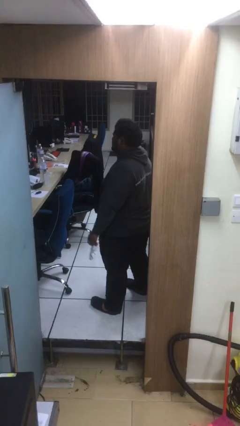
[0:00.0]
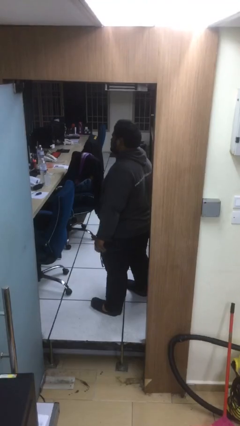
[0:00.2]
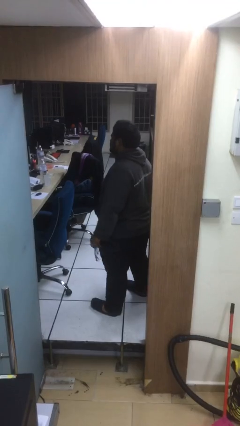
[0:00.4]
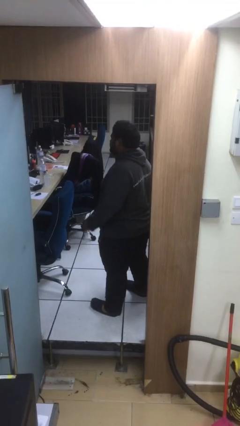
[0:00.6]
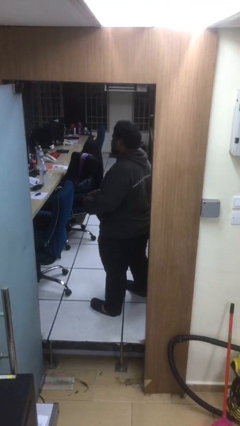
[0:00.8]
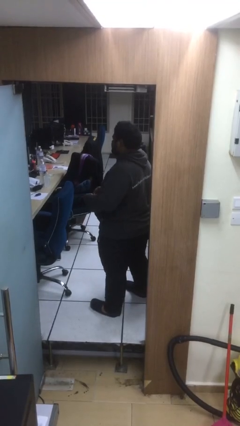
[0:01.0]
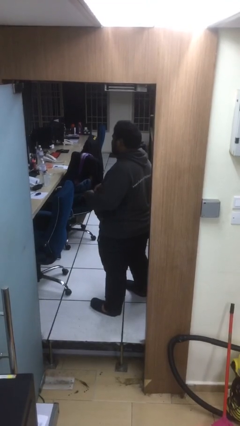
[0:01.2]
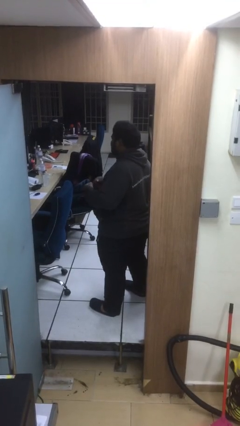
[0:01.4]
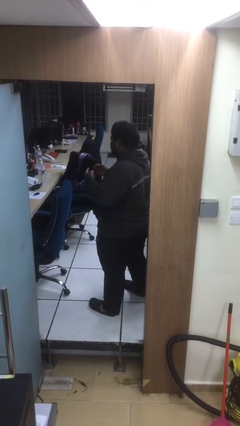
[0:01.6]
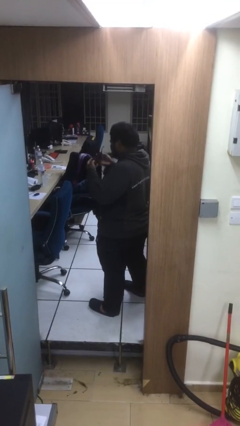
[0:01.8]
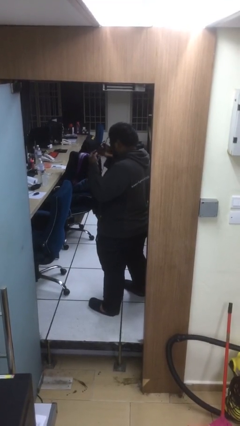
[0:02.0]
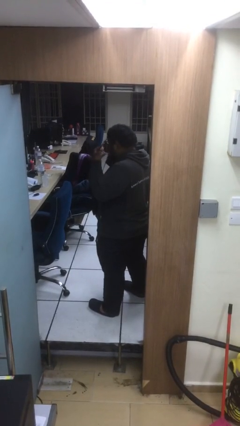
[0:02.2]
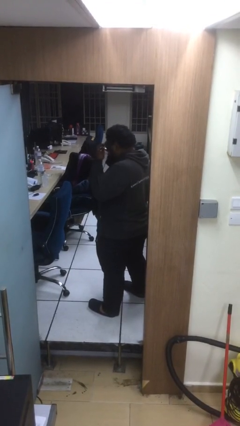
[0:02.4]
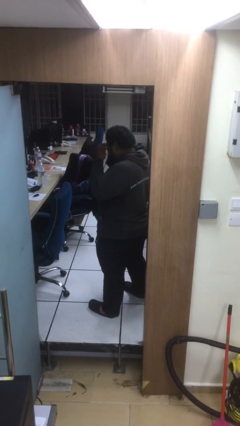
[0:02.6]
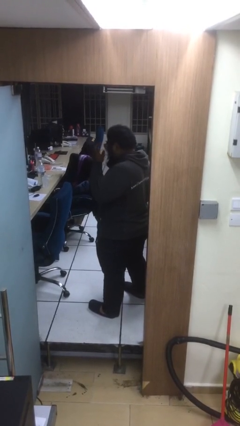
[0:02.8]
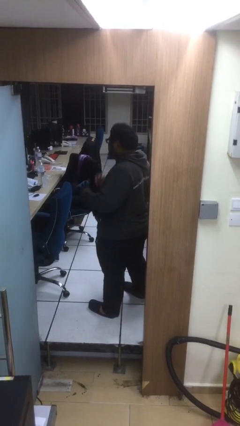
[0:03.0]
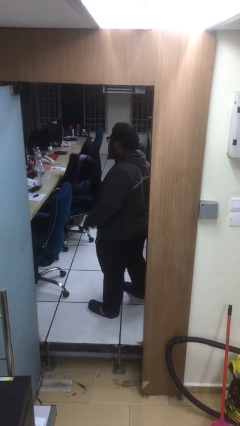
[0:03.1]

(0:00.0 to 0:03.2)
person puts on glasses

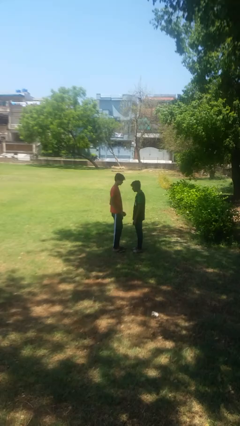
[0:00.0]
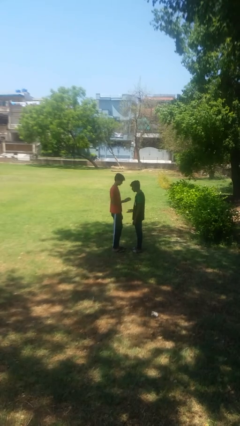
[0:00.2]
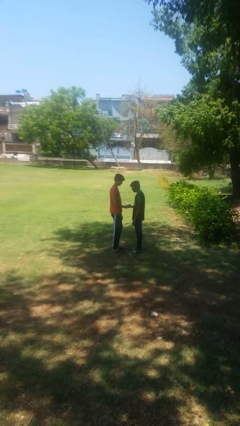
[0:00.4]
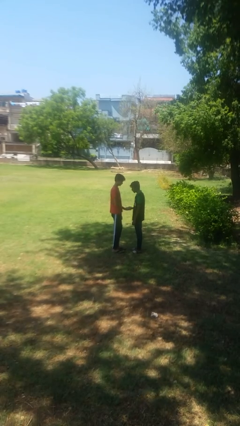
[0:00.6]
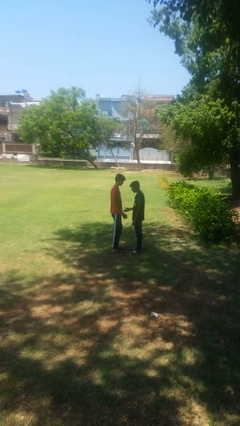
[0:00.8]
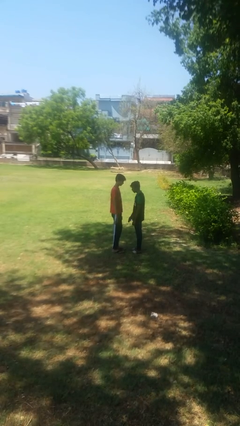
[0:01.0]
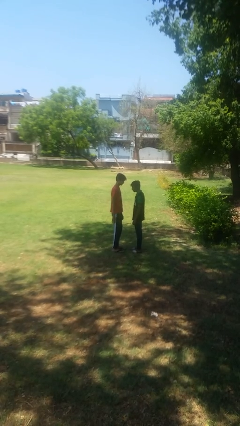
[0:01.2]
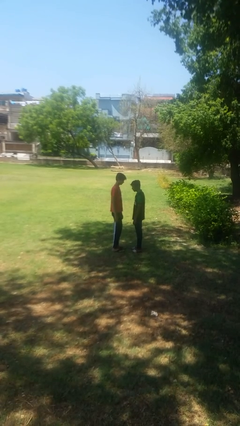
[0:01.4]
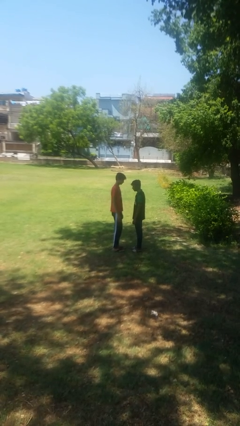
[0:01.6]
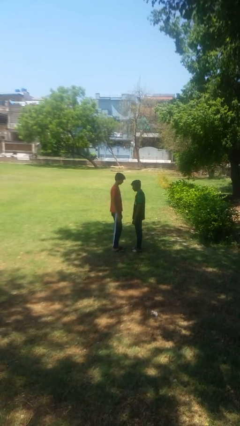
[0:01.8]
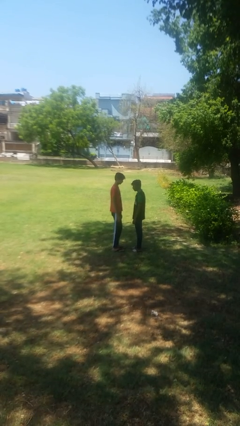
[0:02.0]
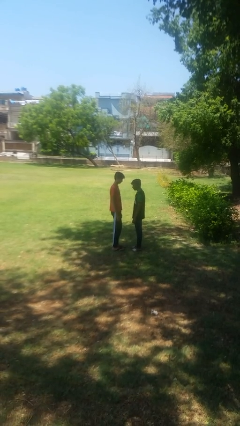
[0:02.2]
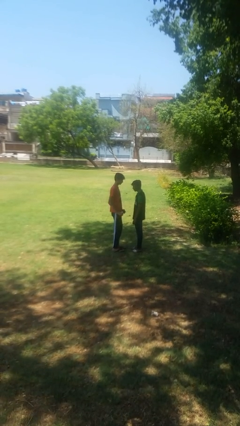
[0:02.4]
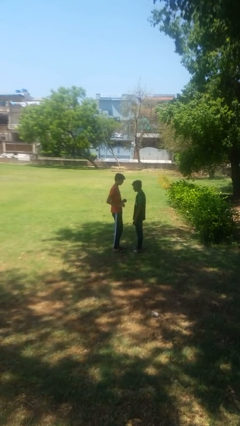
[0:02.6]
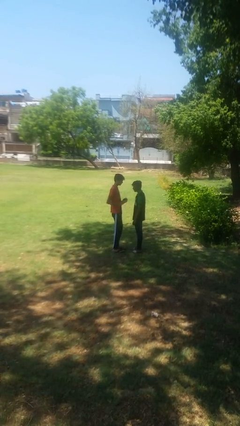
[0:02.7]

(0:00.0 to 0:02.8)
person highfives hand

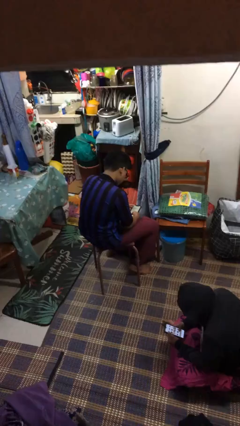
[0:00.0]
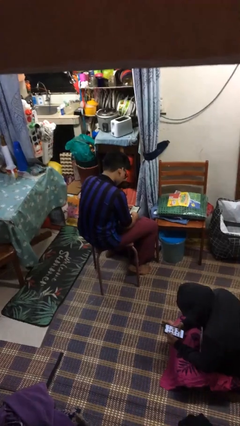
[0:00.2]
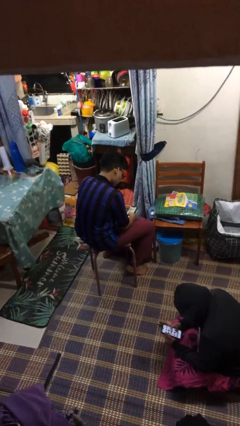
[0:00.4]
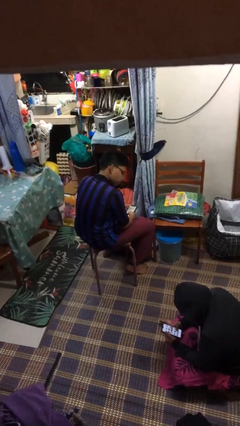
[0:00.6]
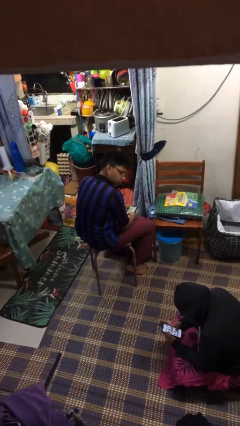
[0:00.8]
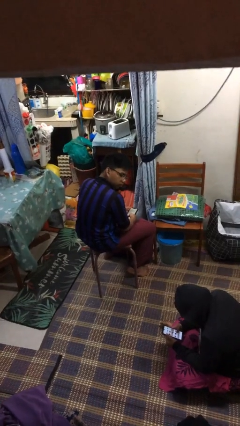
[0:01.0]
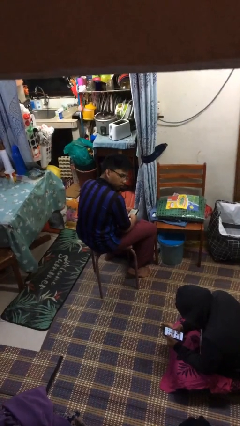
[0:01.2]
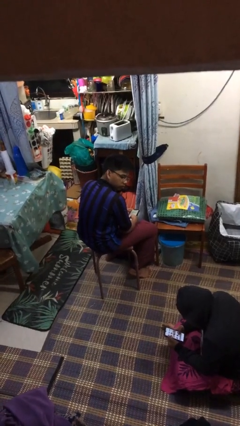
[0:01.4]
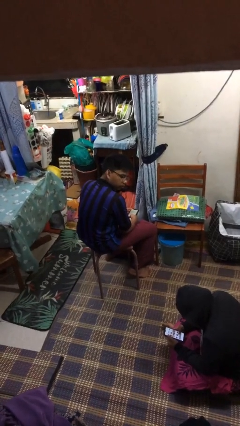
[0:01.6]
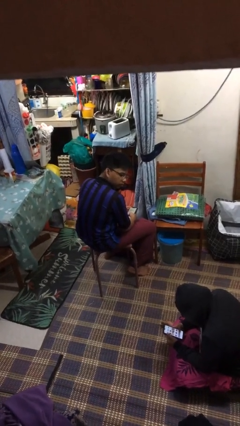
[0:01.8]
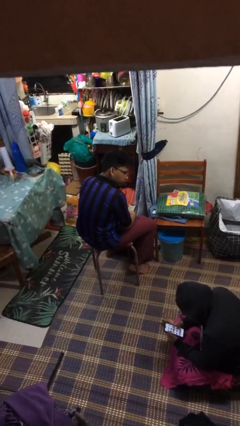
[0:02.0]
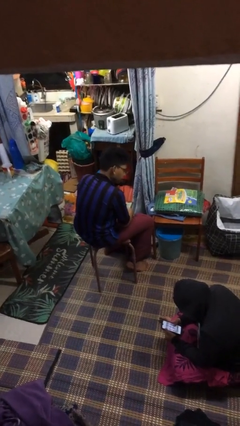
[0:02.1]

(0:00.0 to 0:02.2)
person looks over shoulder

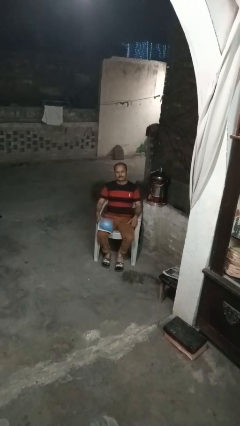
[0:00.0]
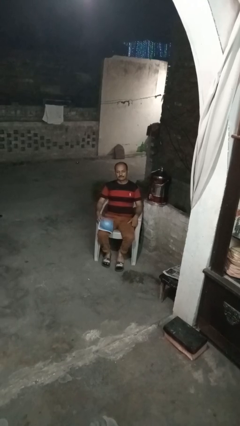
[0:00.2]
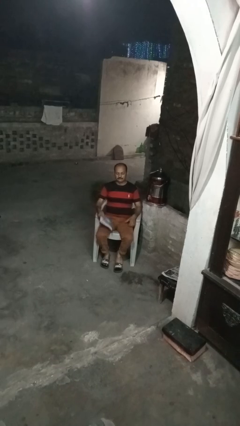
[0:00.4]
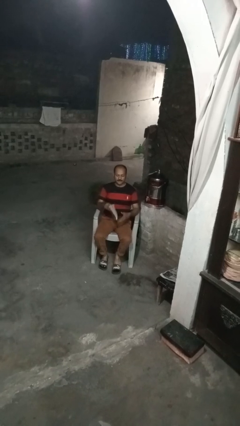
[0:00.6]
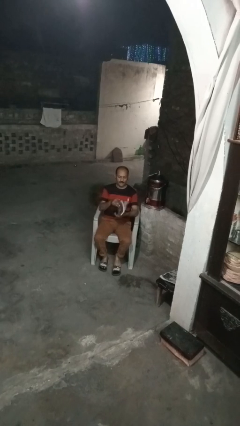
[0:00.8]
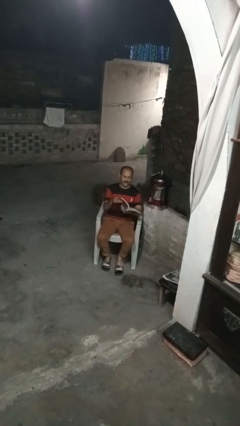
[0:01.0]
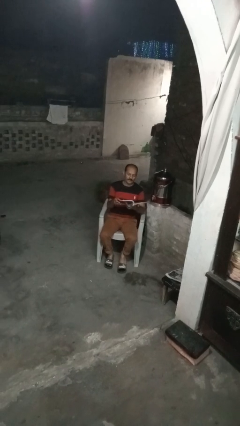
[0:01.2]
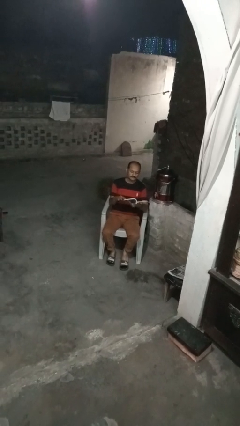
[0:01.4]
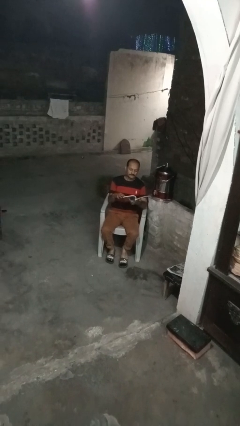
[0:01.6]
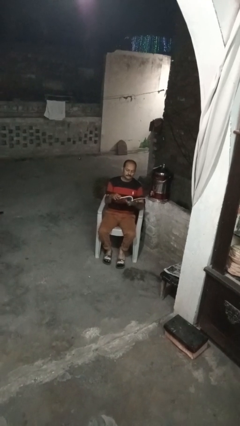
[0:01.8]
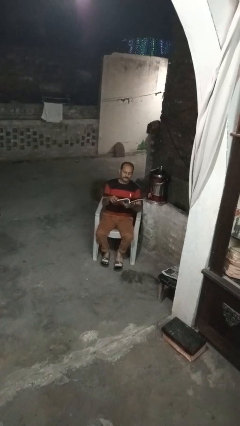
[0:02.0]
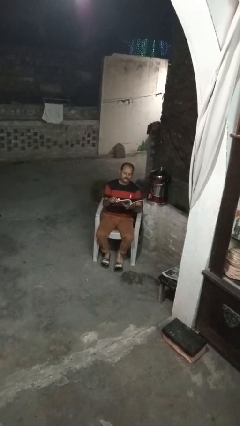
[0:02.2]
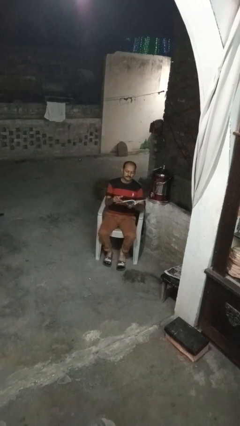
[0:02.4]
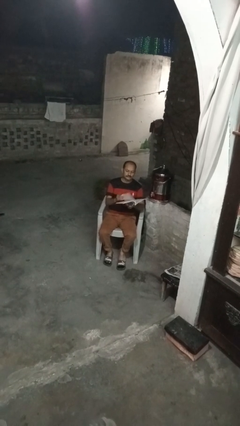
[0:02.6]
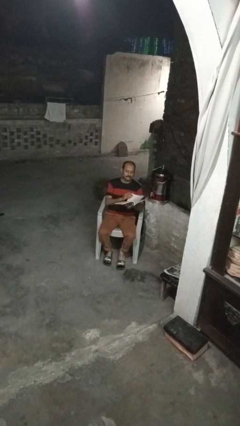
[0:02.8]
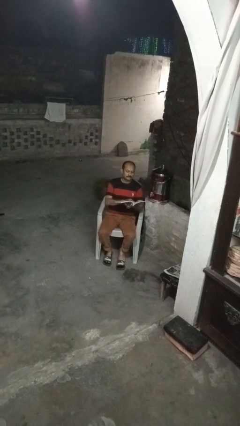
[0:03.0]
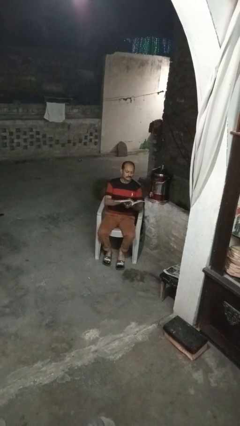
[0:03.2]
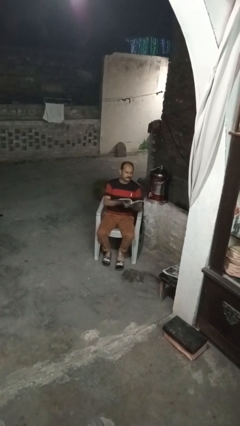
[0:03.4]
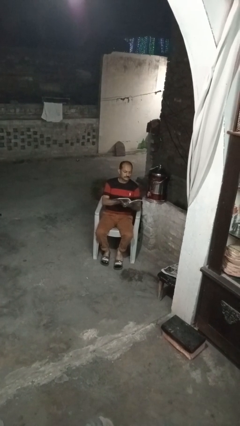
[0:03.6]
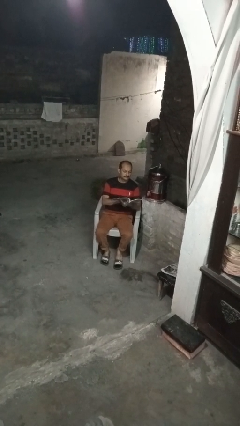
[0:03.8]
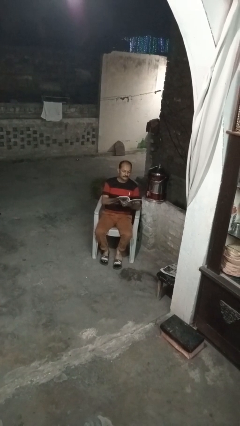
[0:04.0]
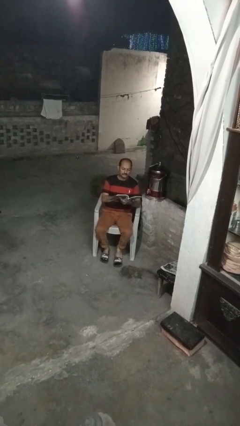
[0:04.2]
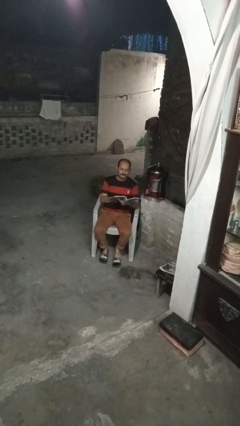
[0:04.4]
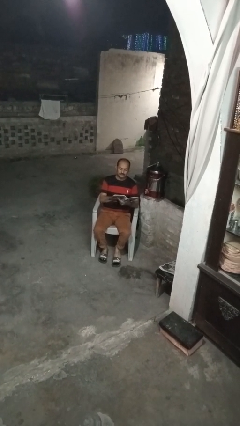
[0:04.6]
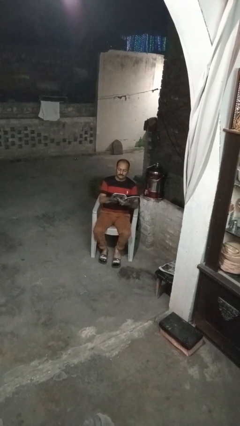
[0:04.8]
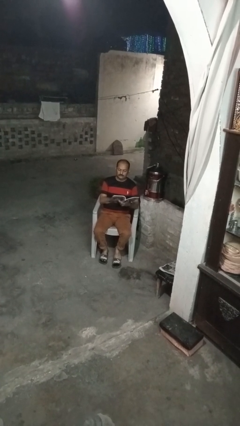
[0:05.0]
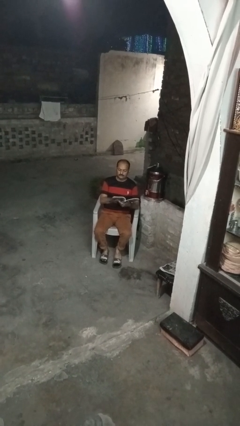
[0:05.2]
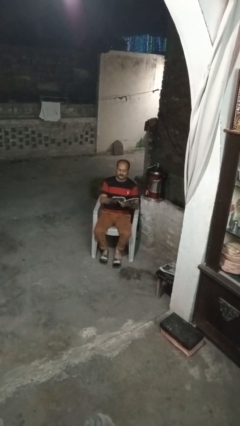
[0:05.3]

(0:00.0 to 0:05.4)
person reads book

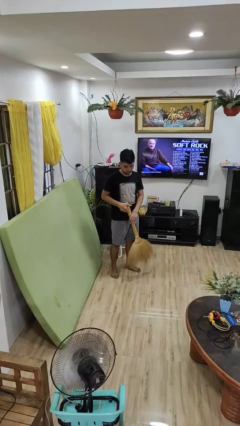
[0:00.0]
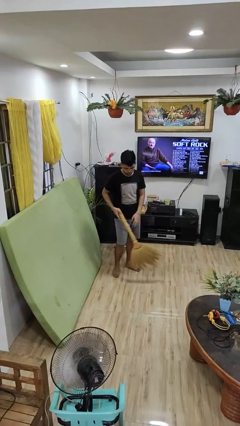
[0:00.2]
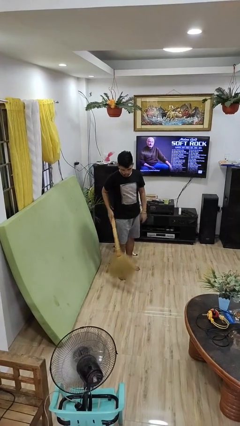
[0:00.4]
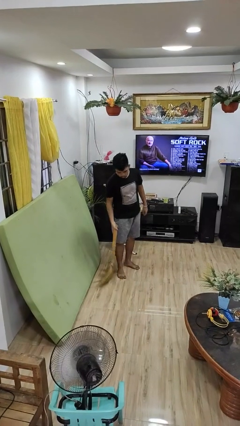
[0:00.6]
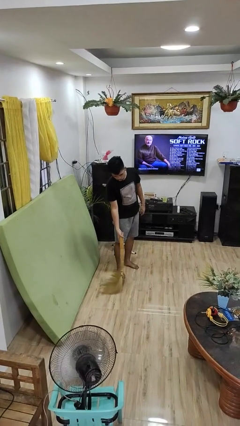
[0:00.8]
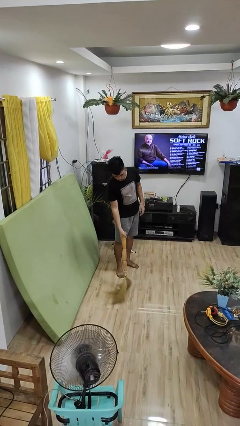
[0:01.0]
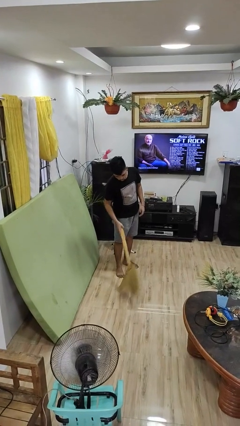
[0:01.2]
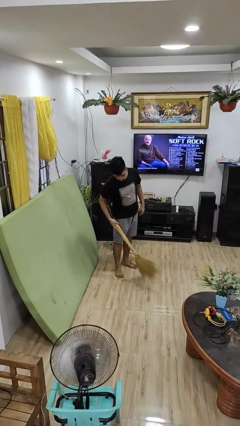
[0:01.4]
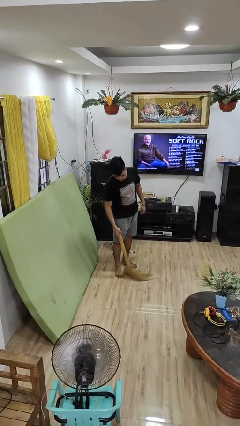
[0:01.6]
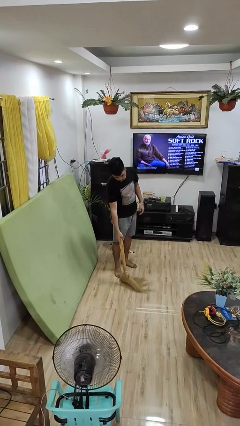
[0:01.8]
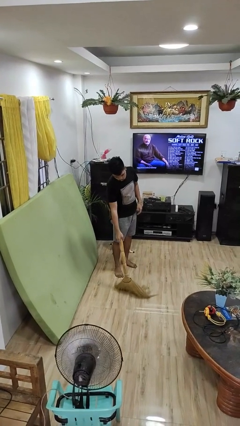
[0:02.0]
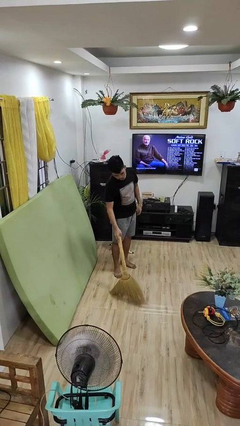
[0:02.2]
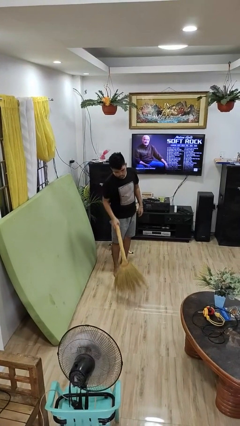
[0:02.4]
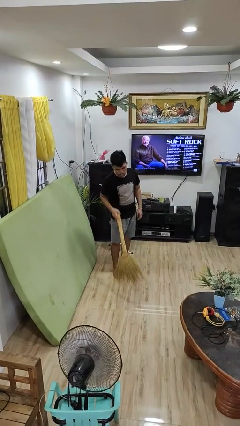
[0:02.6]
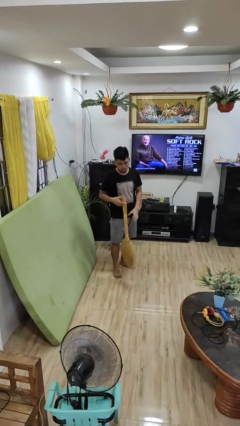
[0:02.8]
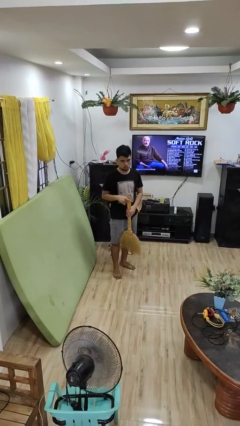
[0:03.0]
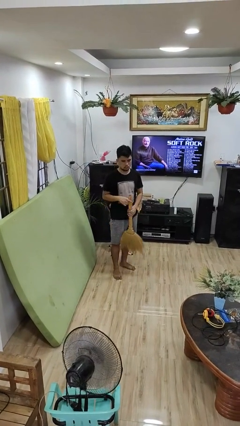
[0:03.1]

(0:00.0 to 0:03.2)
person sweeps floor

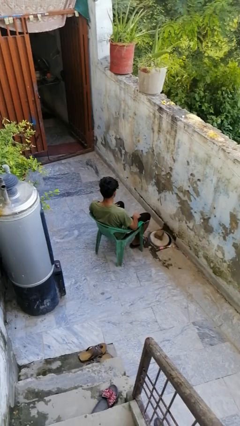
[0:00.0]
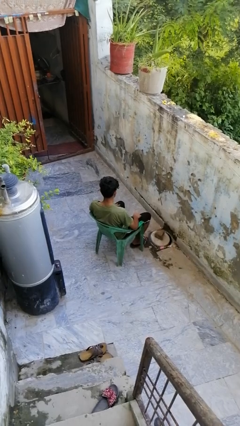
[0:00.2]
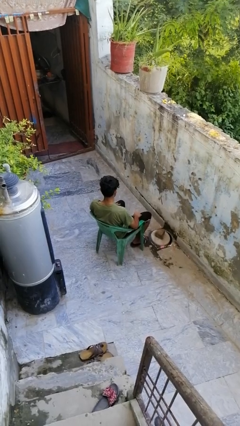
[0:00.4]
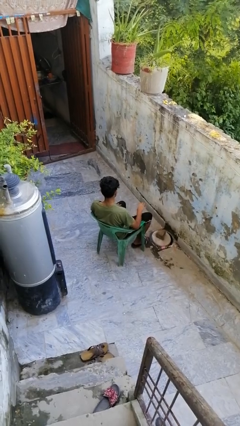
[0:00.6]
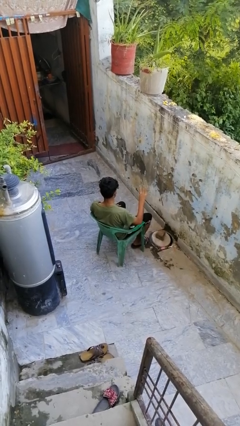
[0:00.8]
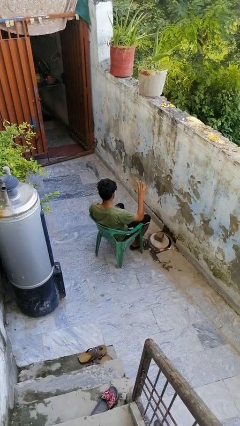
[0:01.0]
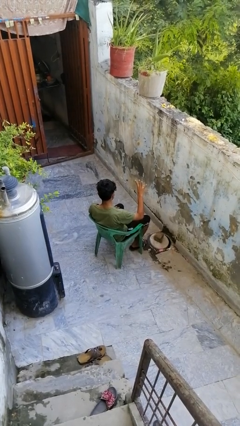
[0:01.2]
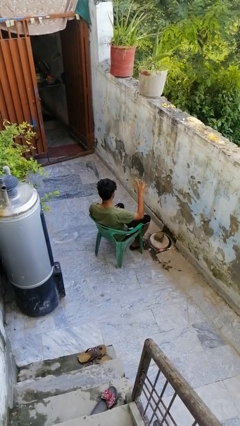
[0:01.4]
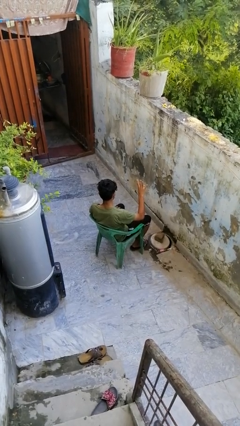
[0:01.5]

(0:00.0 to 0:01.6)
person gestures number four
